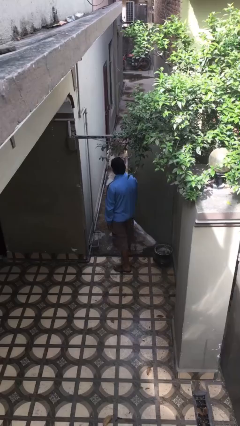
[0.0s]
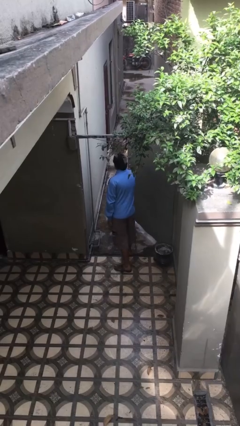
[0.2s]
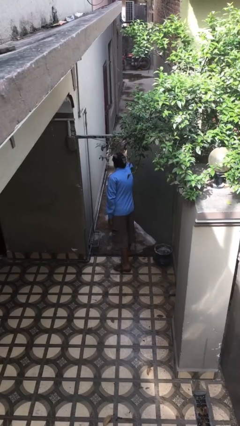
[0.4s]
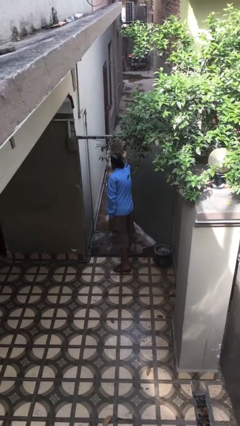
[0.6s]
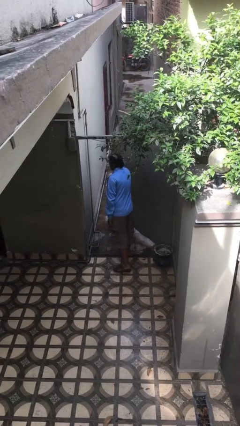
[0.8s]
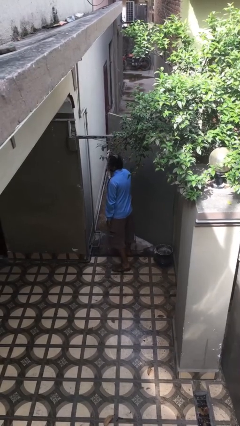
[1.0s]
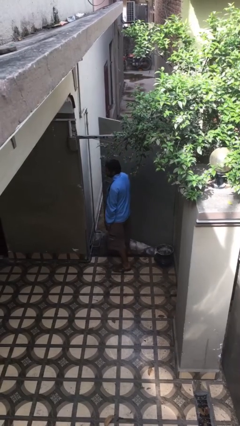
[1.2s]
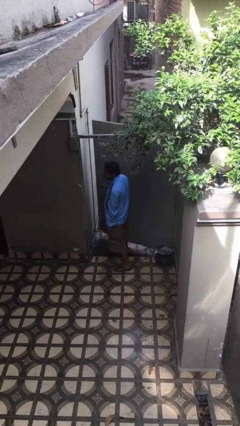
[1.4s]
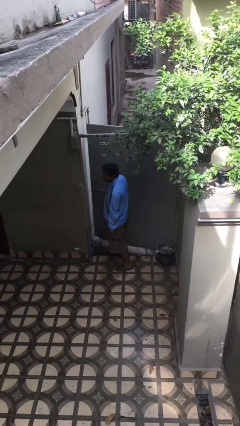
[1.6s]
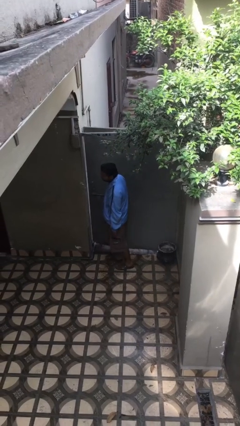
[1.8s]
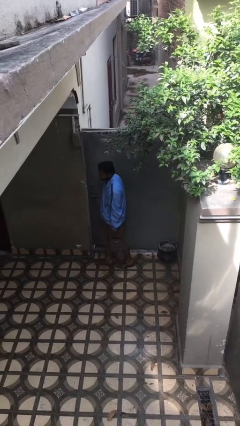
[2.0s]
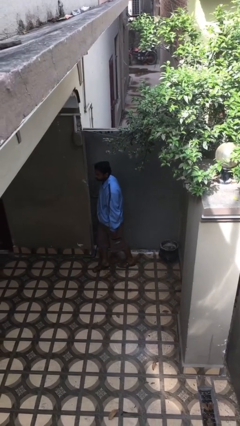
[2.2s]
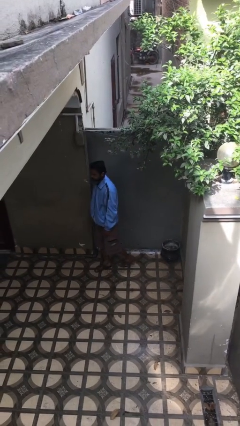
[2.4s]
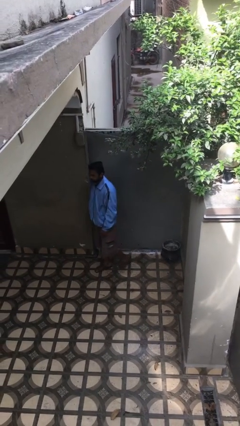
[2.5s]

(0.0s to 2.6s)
person closes facility door

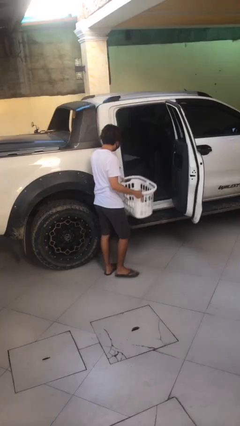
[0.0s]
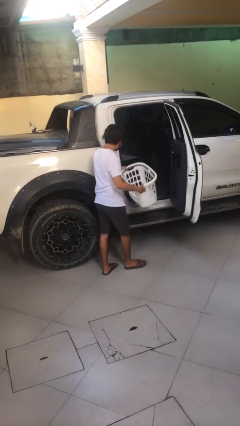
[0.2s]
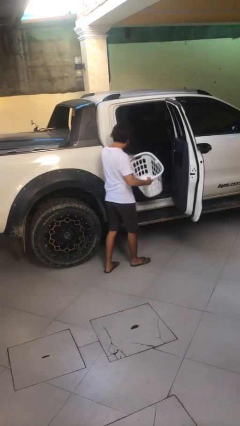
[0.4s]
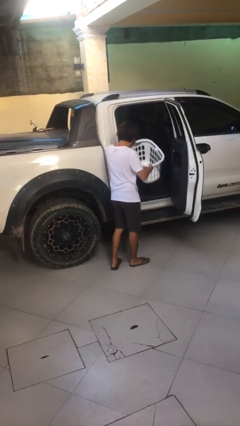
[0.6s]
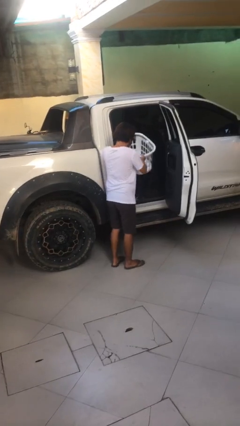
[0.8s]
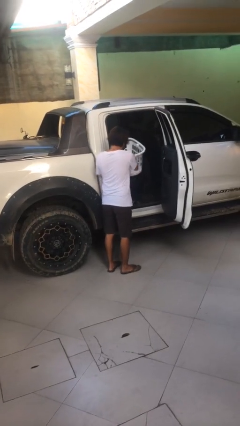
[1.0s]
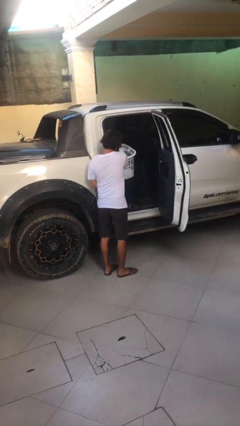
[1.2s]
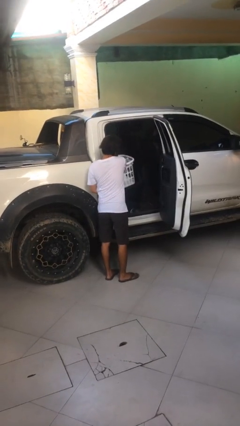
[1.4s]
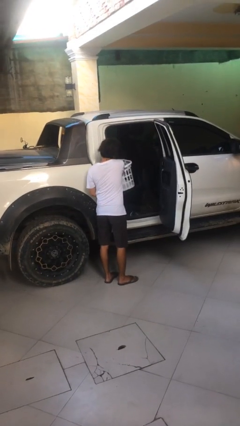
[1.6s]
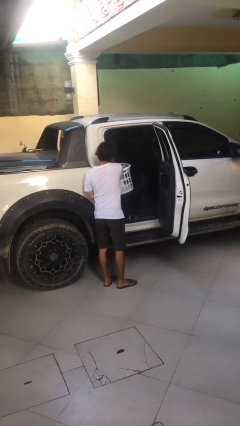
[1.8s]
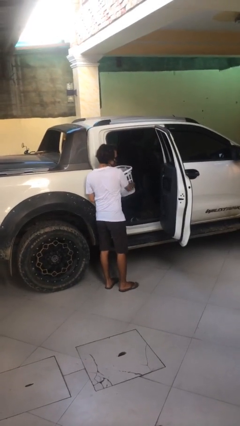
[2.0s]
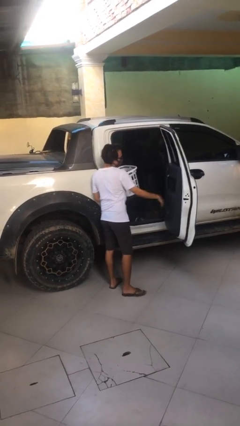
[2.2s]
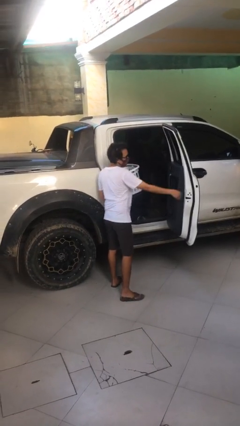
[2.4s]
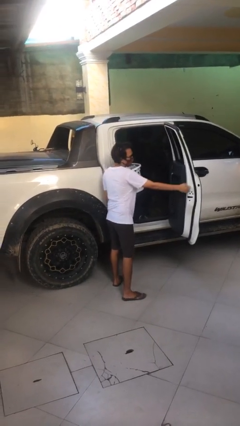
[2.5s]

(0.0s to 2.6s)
person loads car

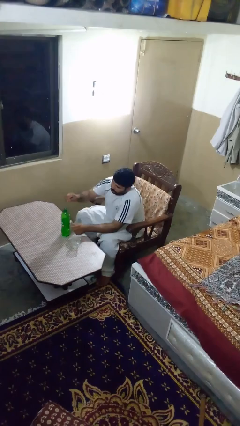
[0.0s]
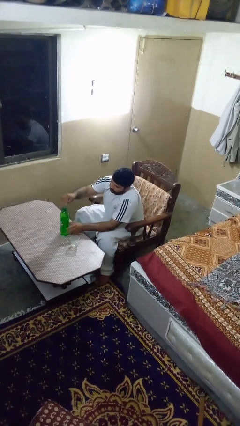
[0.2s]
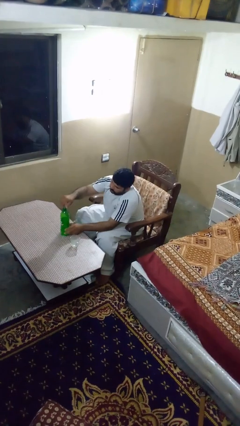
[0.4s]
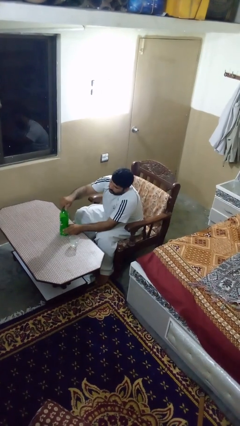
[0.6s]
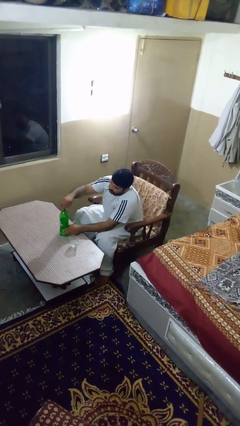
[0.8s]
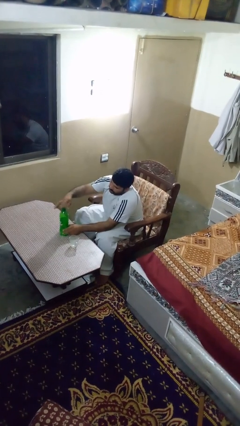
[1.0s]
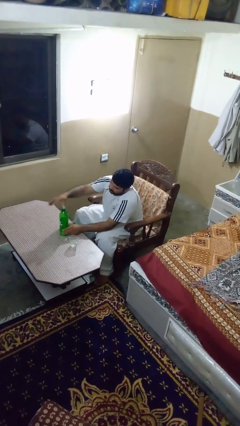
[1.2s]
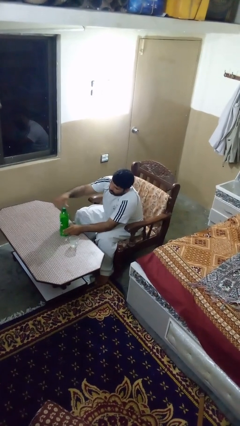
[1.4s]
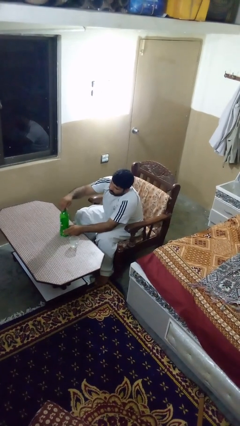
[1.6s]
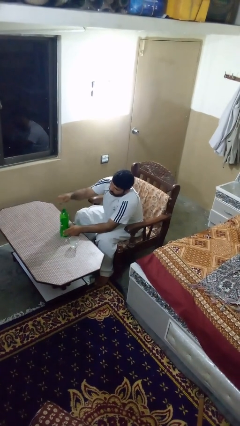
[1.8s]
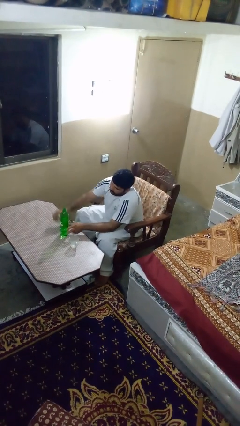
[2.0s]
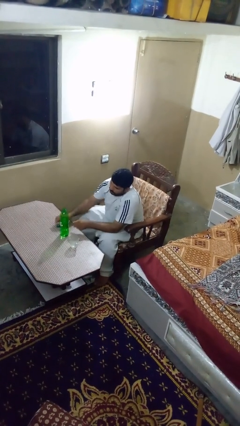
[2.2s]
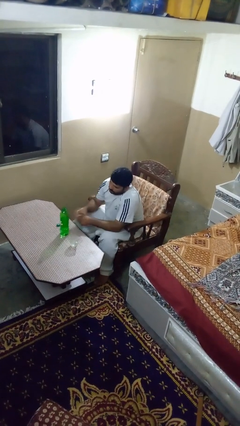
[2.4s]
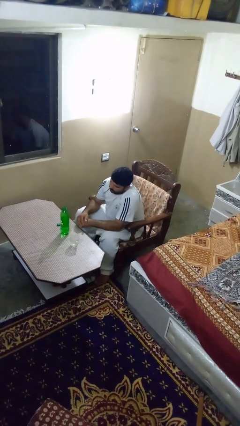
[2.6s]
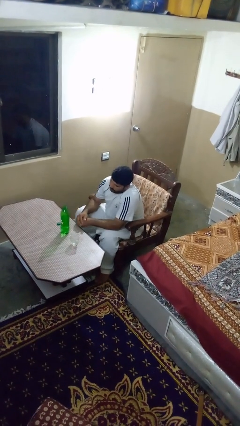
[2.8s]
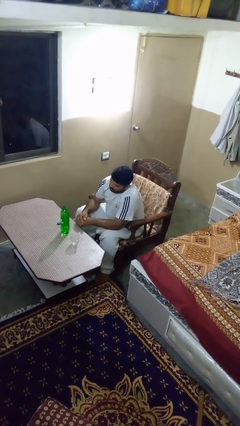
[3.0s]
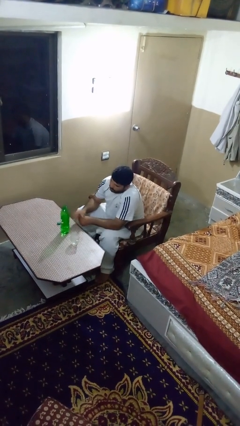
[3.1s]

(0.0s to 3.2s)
person unscrews lid from bottle

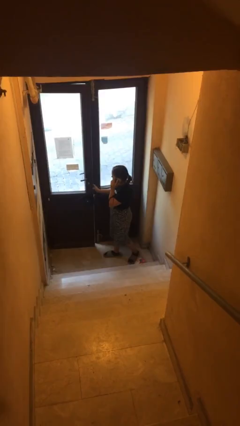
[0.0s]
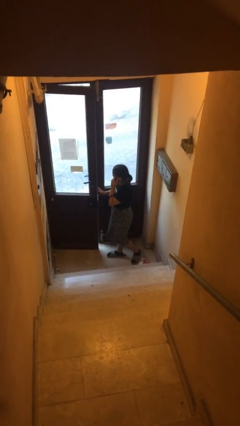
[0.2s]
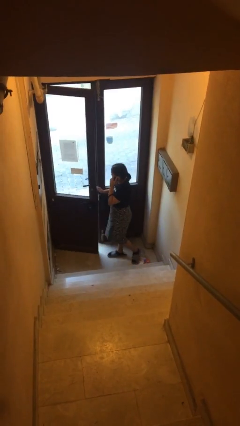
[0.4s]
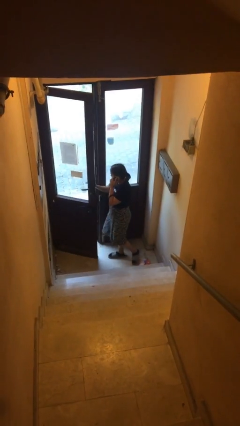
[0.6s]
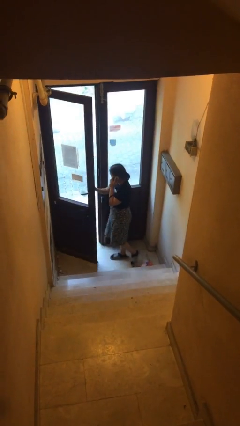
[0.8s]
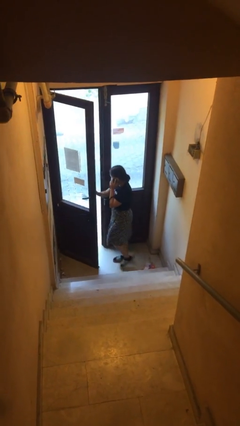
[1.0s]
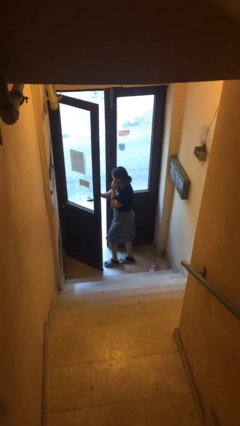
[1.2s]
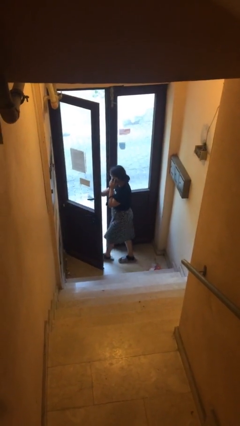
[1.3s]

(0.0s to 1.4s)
person opens facility door

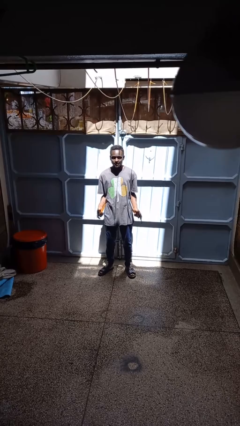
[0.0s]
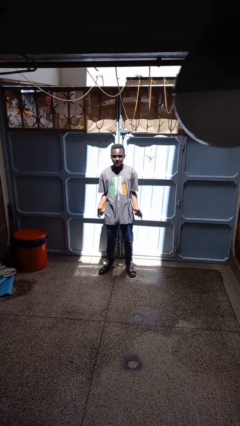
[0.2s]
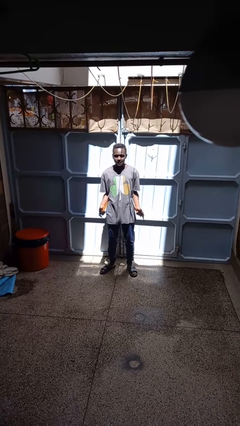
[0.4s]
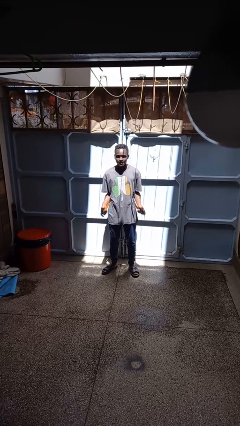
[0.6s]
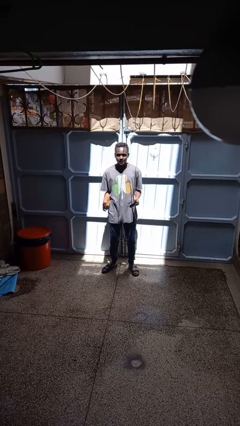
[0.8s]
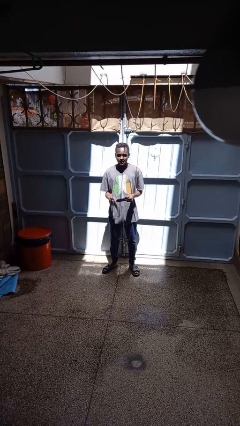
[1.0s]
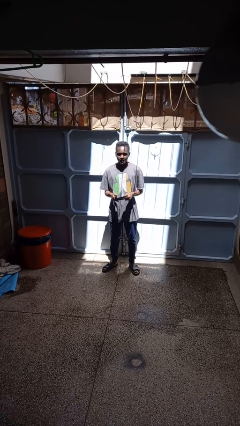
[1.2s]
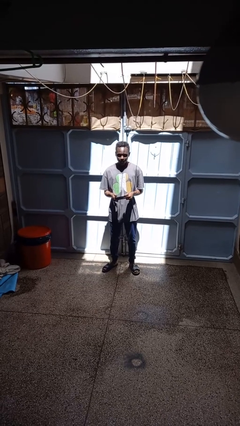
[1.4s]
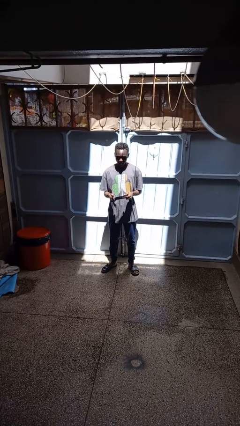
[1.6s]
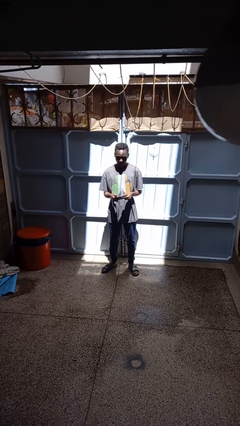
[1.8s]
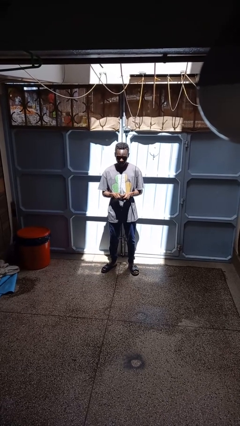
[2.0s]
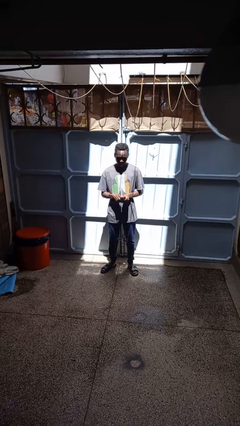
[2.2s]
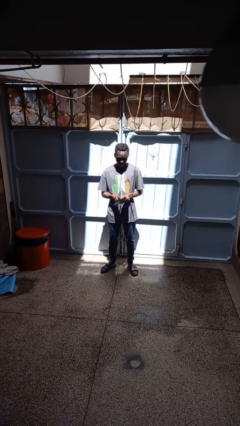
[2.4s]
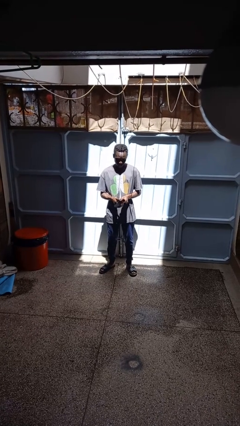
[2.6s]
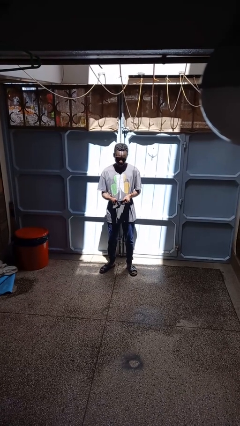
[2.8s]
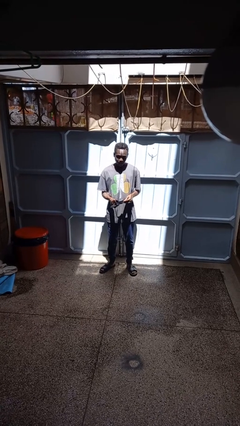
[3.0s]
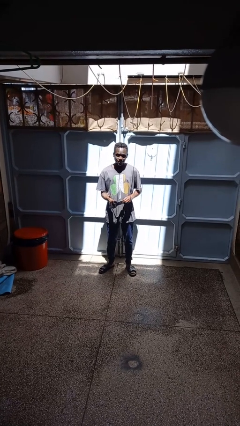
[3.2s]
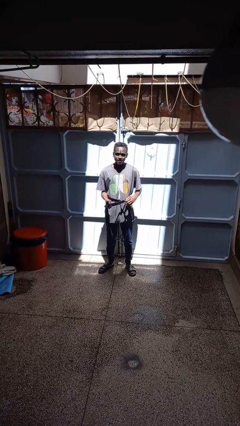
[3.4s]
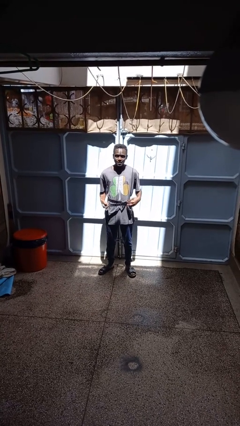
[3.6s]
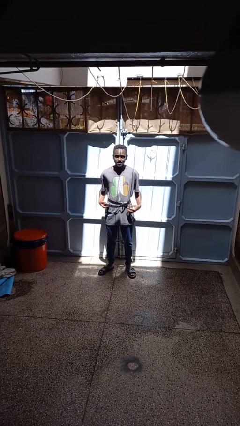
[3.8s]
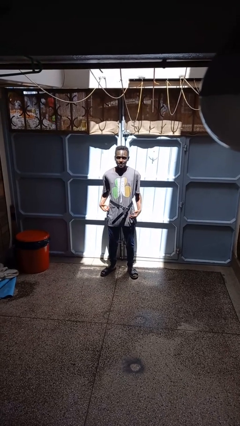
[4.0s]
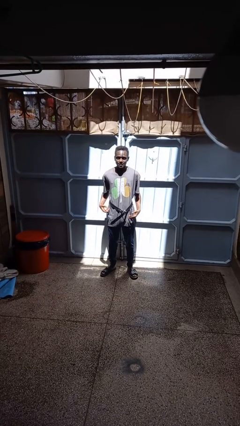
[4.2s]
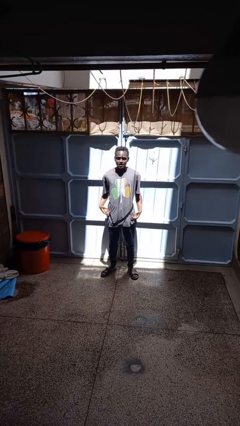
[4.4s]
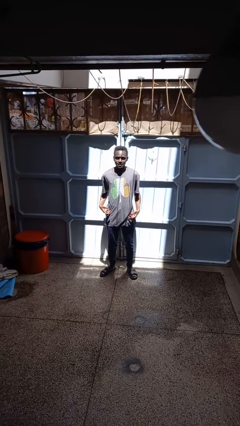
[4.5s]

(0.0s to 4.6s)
person puts on belt

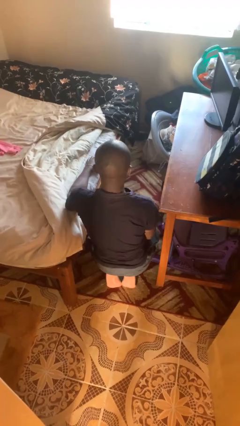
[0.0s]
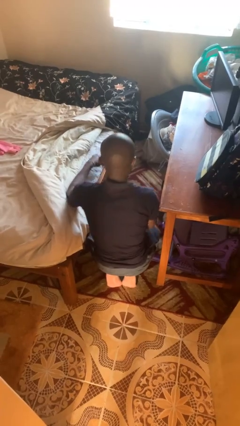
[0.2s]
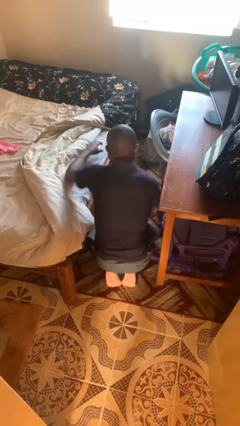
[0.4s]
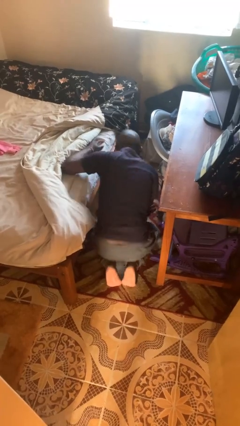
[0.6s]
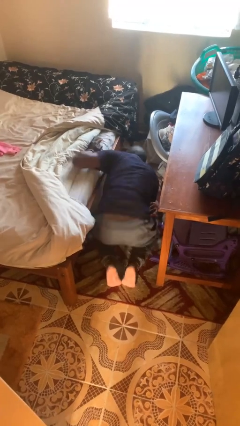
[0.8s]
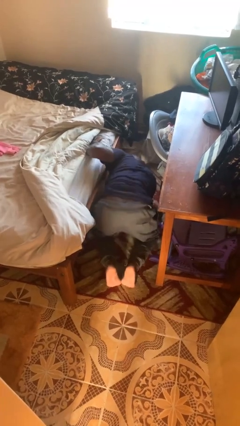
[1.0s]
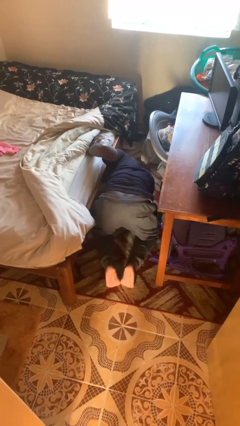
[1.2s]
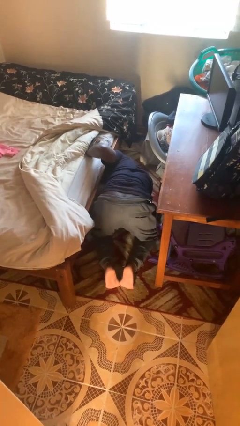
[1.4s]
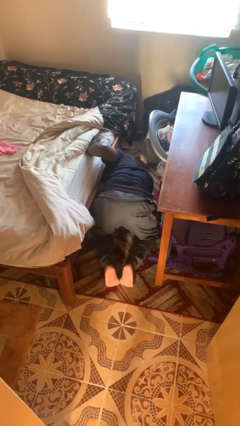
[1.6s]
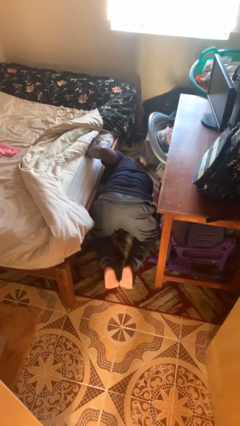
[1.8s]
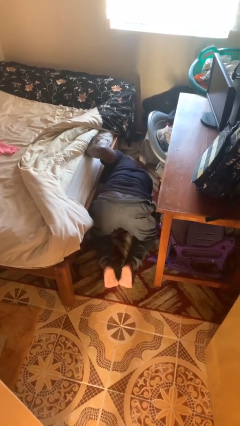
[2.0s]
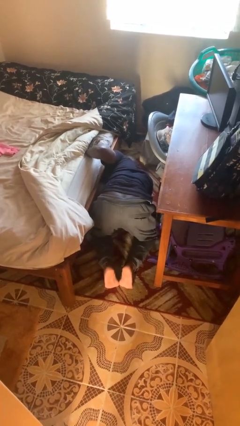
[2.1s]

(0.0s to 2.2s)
person searches under bed

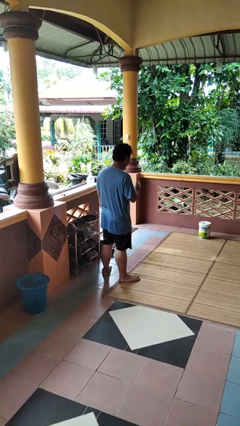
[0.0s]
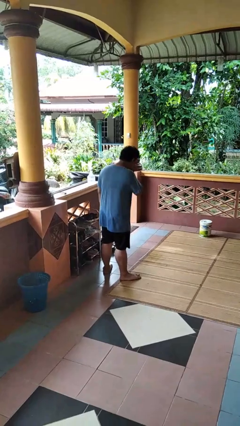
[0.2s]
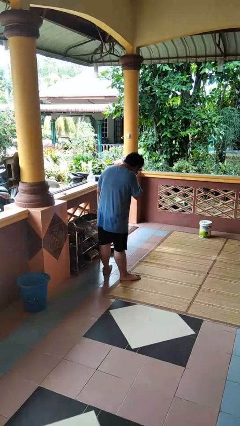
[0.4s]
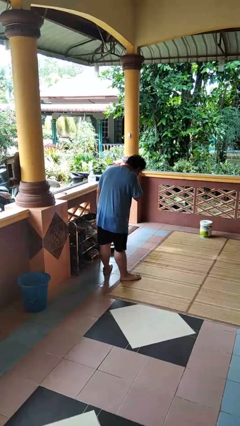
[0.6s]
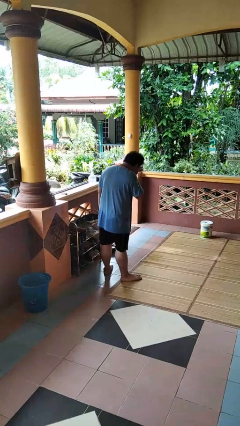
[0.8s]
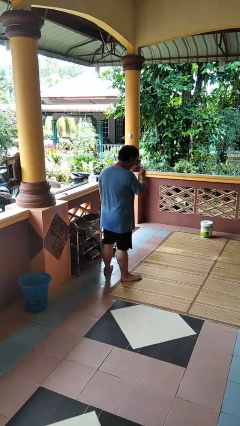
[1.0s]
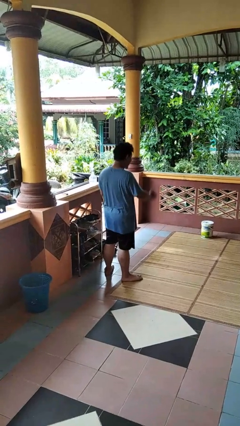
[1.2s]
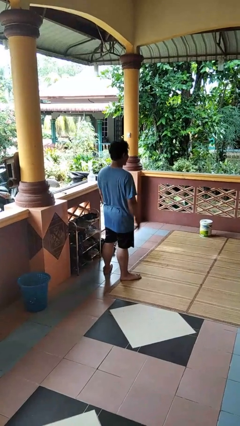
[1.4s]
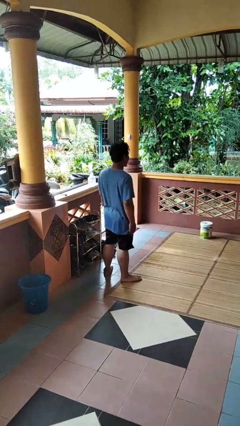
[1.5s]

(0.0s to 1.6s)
person sneezes into hand
